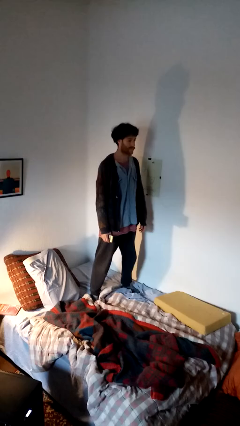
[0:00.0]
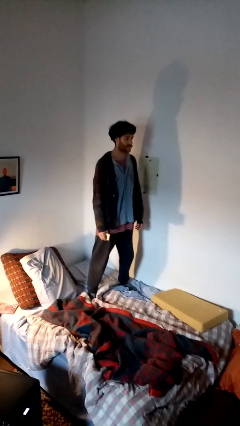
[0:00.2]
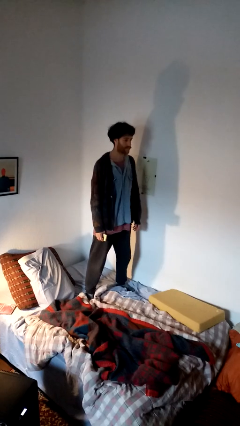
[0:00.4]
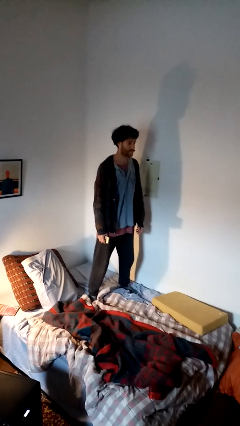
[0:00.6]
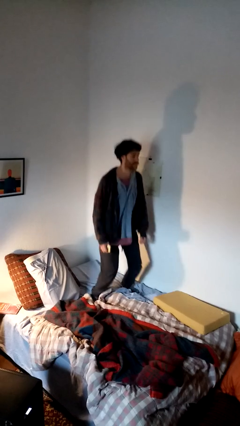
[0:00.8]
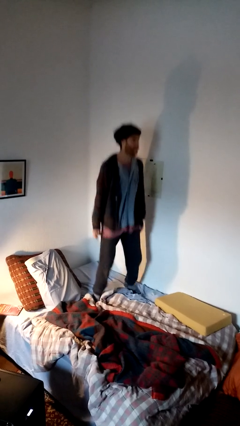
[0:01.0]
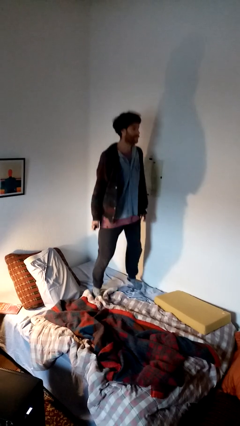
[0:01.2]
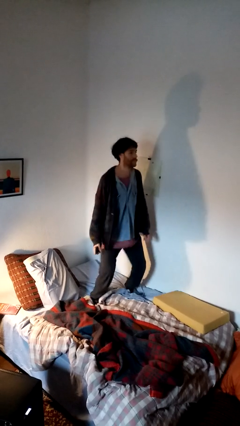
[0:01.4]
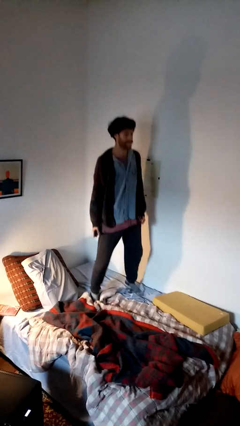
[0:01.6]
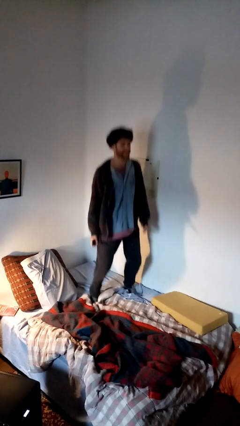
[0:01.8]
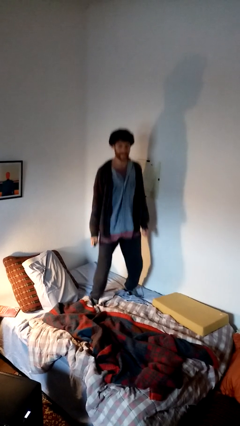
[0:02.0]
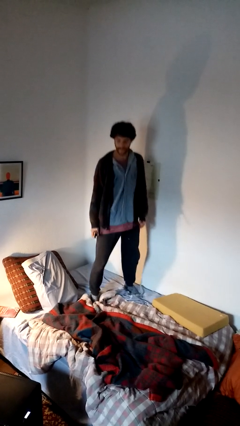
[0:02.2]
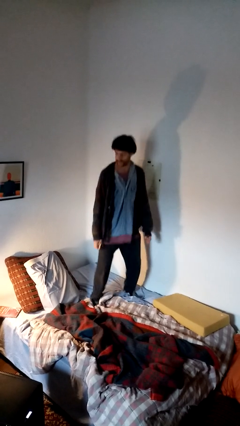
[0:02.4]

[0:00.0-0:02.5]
person jumps on bed

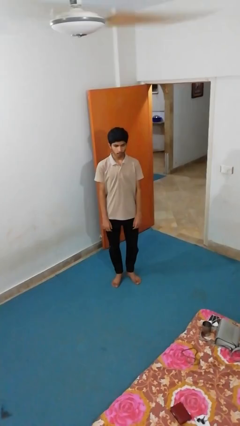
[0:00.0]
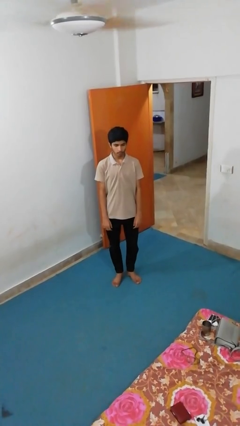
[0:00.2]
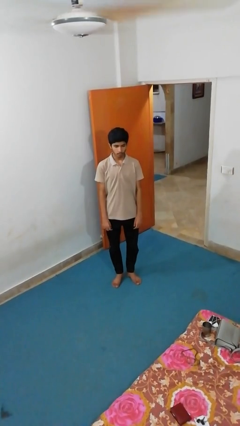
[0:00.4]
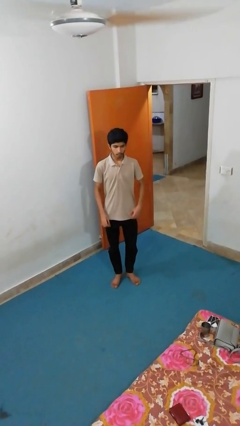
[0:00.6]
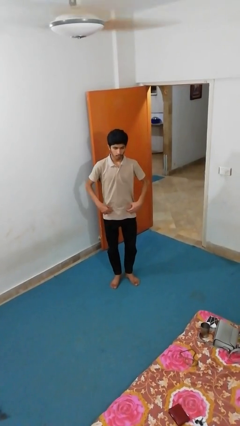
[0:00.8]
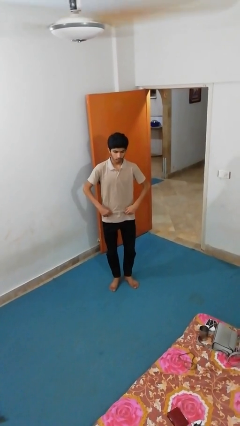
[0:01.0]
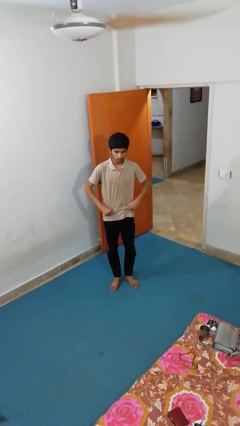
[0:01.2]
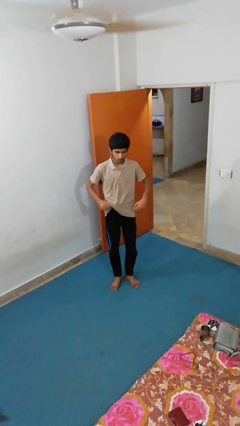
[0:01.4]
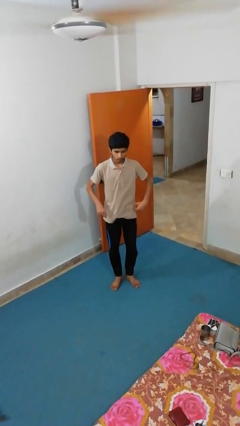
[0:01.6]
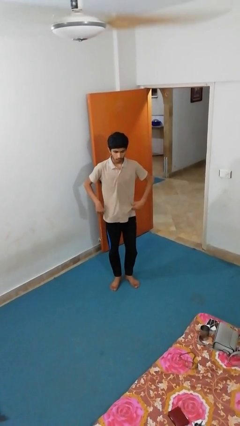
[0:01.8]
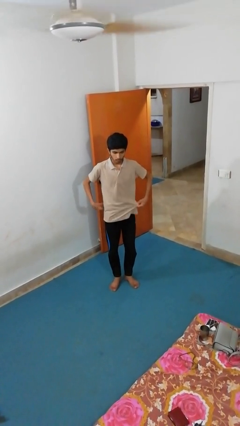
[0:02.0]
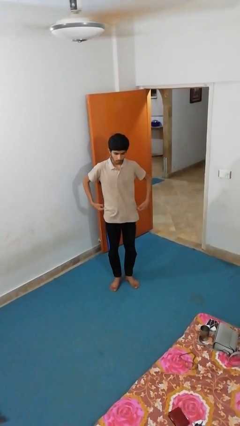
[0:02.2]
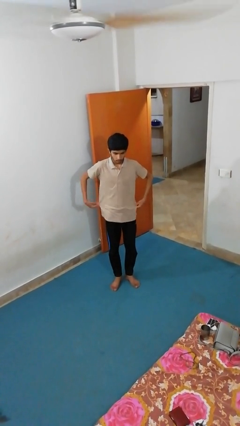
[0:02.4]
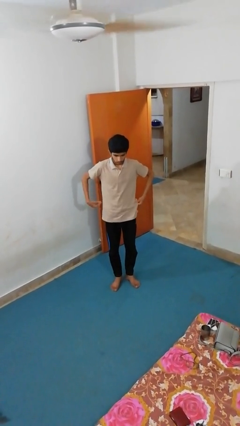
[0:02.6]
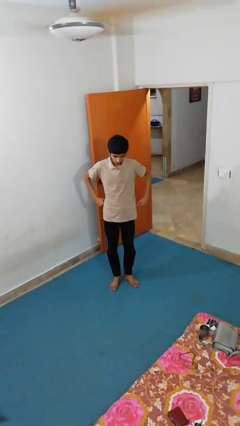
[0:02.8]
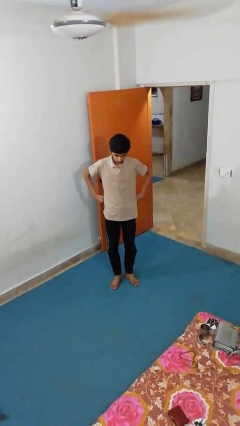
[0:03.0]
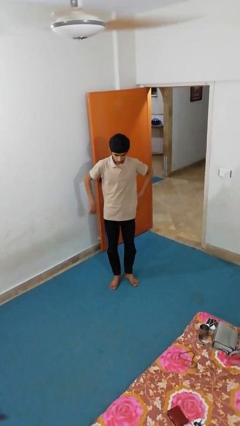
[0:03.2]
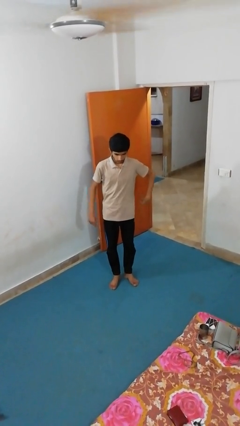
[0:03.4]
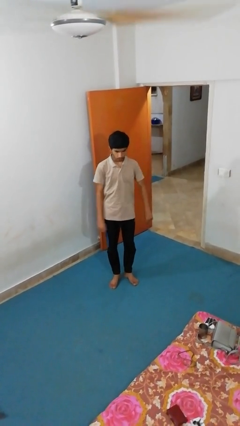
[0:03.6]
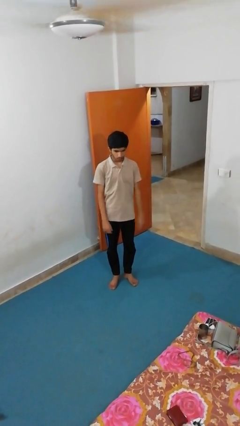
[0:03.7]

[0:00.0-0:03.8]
person hikes up pants

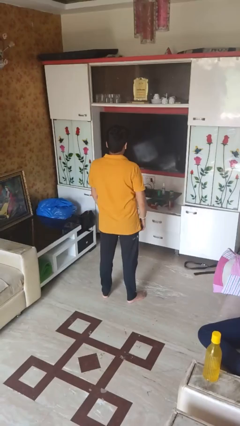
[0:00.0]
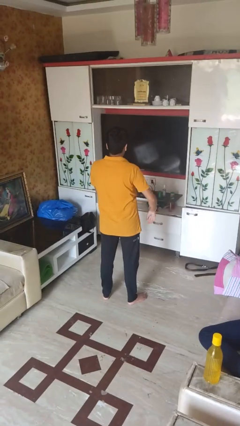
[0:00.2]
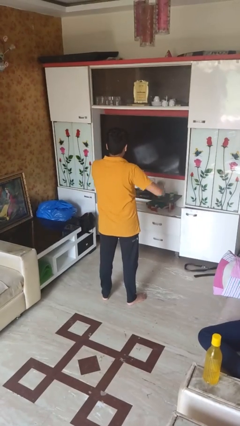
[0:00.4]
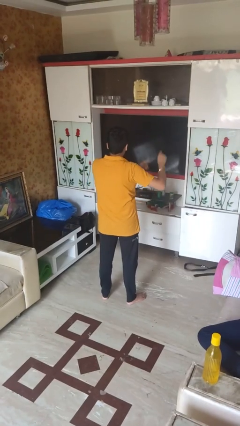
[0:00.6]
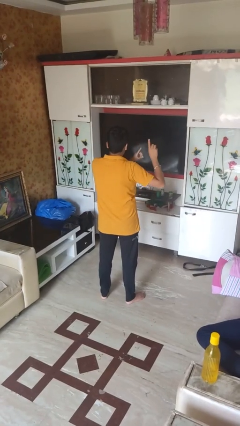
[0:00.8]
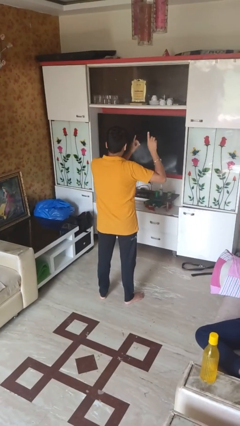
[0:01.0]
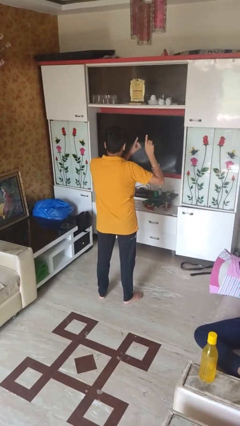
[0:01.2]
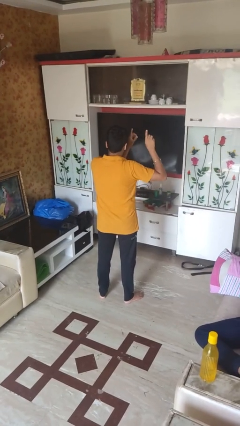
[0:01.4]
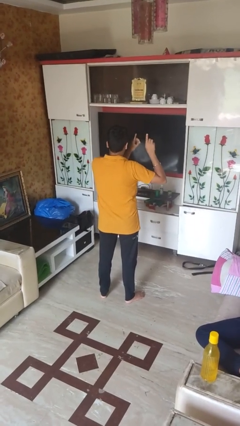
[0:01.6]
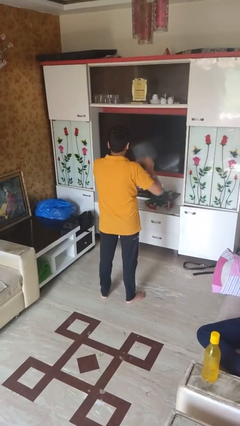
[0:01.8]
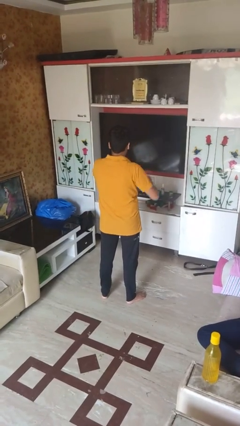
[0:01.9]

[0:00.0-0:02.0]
person dances in place

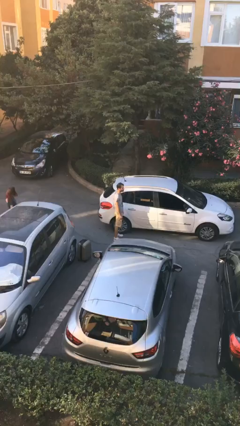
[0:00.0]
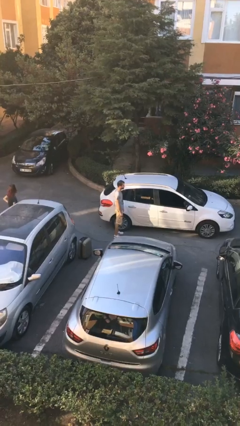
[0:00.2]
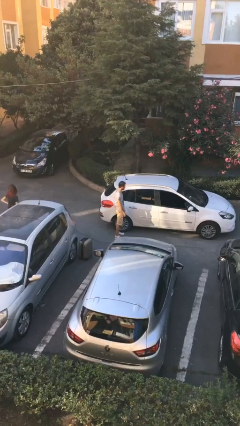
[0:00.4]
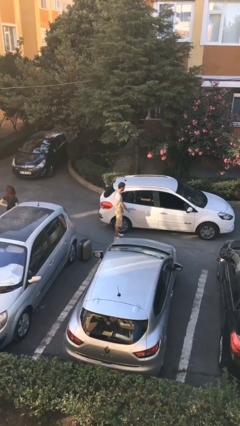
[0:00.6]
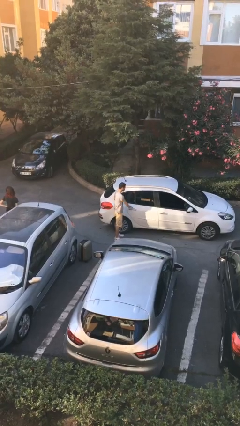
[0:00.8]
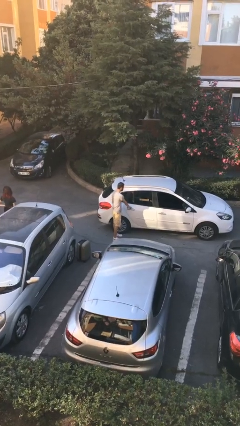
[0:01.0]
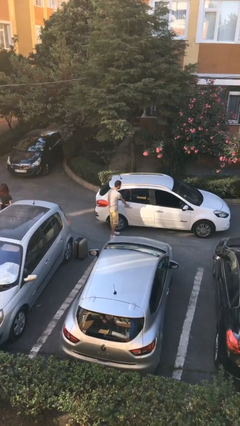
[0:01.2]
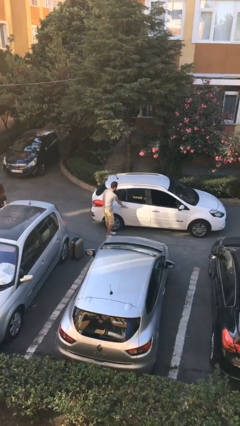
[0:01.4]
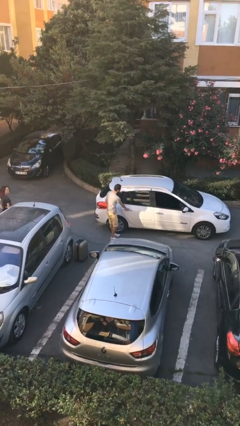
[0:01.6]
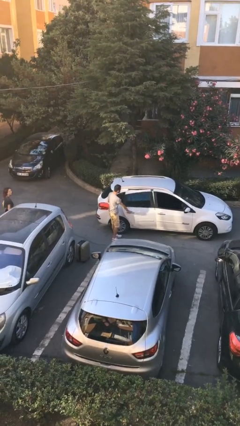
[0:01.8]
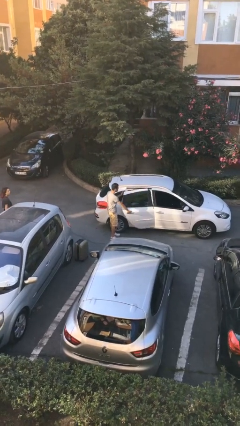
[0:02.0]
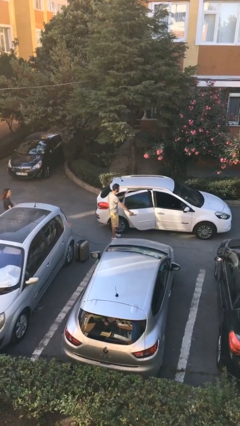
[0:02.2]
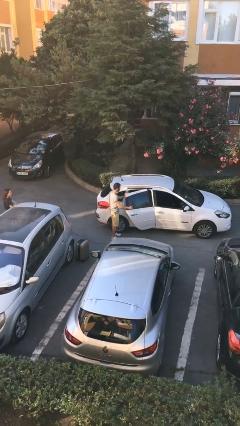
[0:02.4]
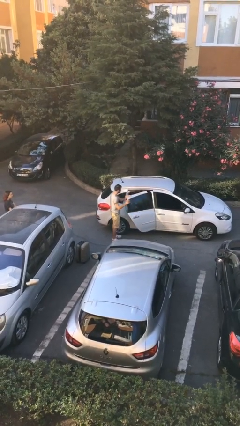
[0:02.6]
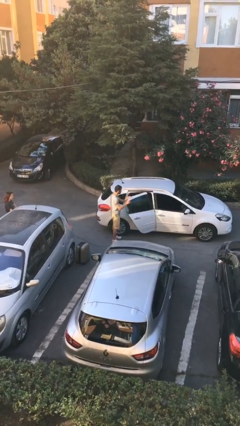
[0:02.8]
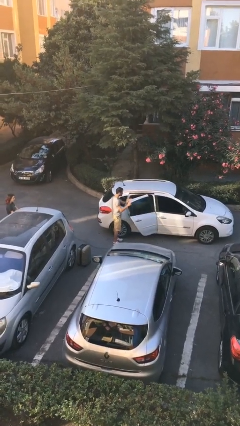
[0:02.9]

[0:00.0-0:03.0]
person opens car door

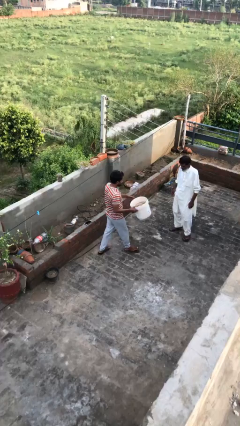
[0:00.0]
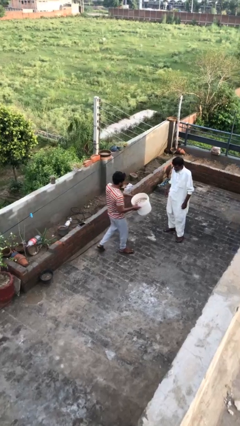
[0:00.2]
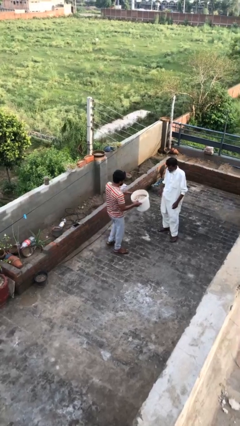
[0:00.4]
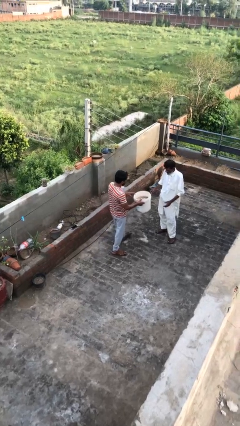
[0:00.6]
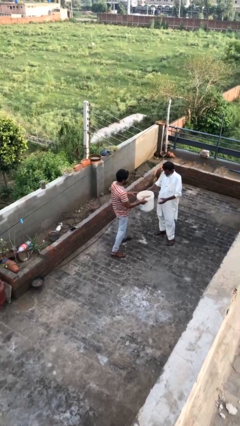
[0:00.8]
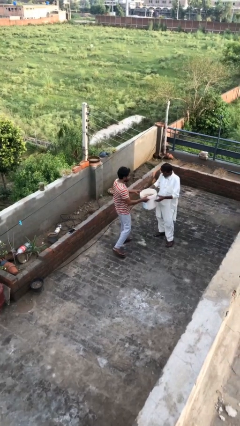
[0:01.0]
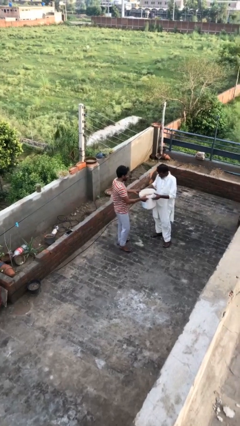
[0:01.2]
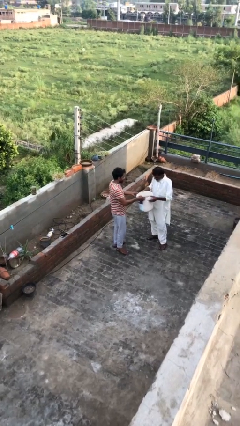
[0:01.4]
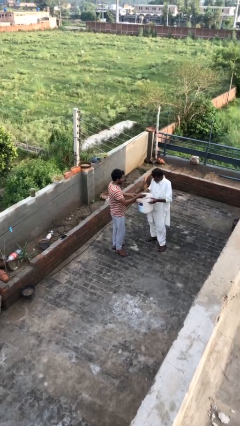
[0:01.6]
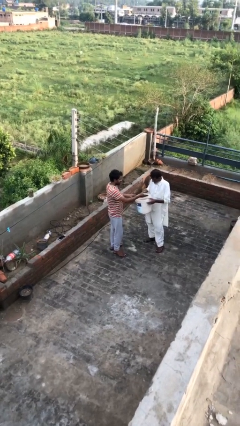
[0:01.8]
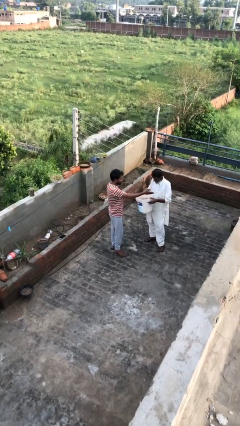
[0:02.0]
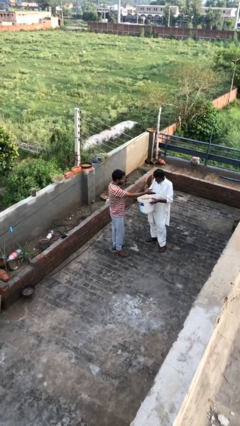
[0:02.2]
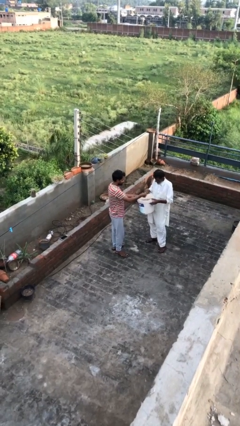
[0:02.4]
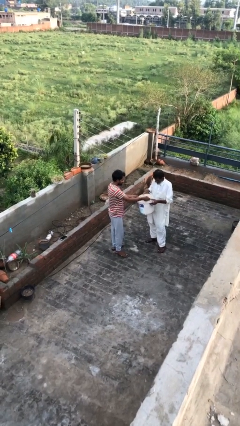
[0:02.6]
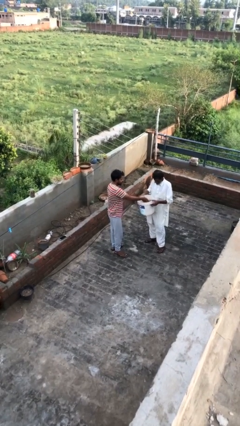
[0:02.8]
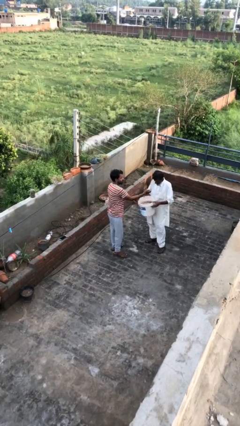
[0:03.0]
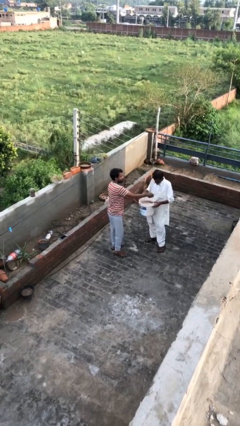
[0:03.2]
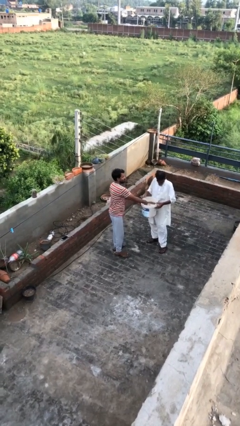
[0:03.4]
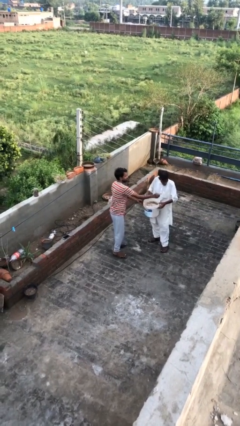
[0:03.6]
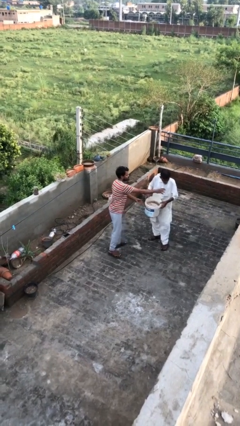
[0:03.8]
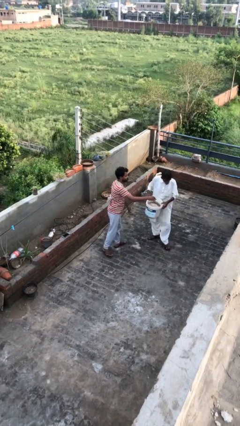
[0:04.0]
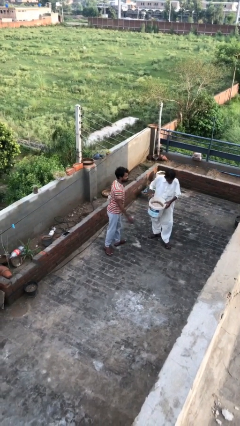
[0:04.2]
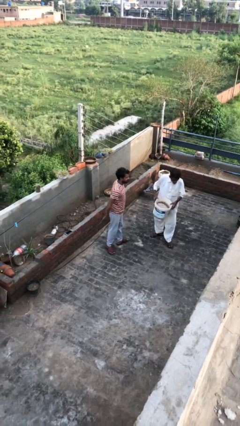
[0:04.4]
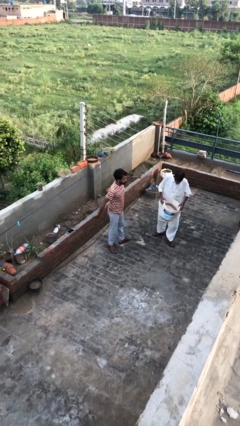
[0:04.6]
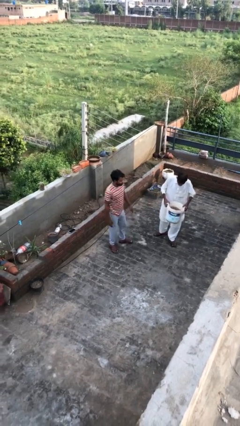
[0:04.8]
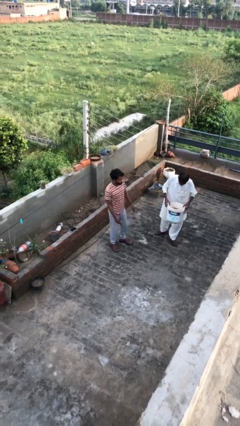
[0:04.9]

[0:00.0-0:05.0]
person transfers object to person

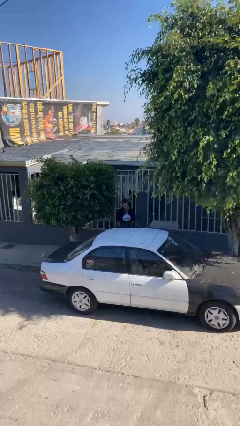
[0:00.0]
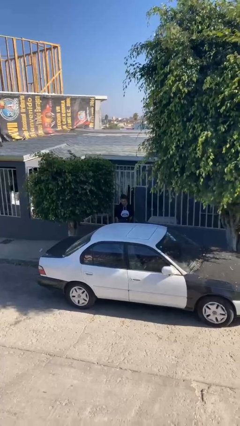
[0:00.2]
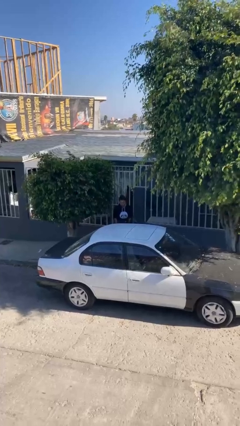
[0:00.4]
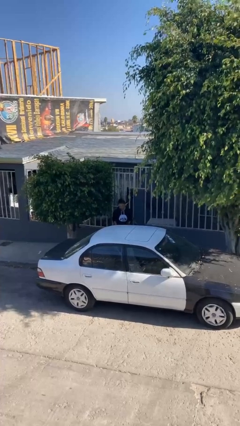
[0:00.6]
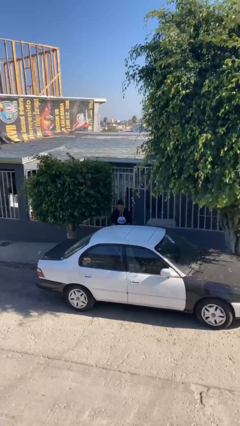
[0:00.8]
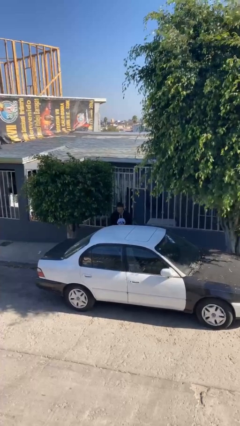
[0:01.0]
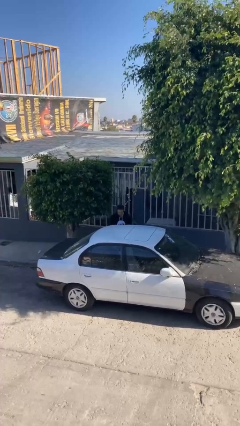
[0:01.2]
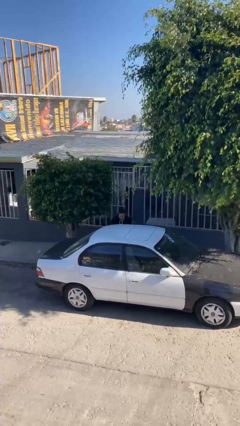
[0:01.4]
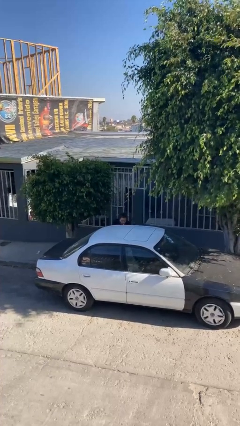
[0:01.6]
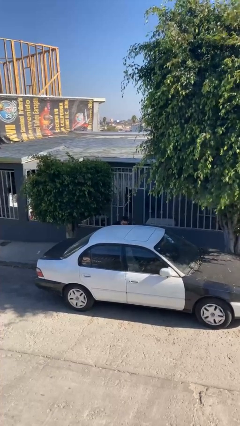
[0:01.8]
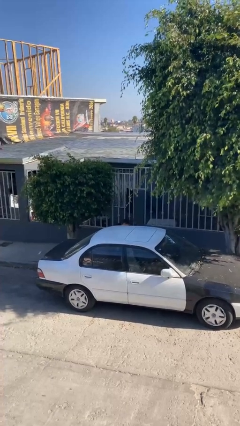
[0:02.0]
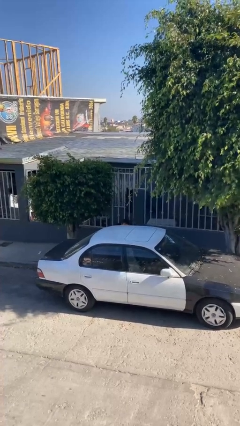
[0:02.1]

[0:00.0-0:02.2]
person loads car
